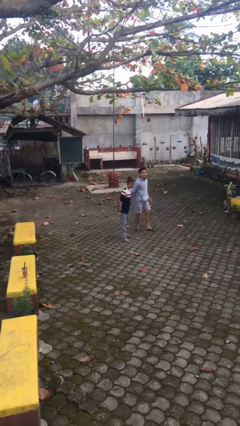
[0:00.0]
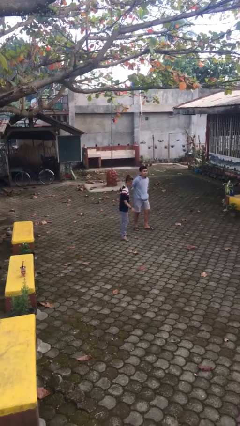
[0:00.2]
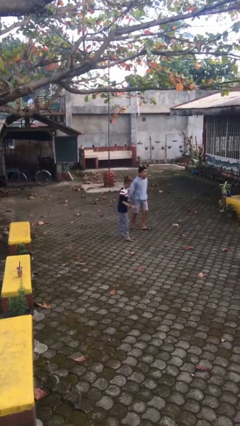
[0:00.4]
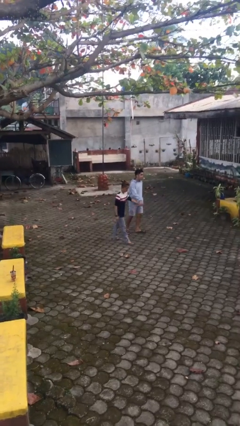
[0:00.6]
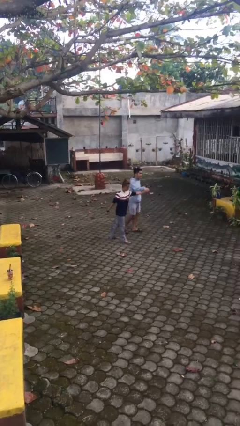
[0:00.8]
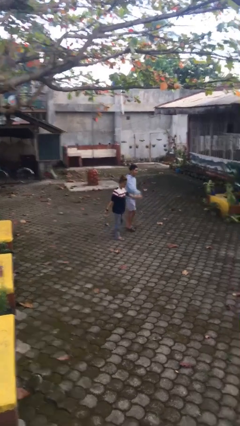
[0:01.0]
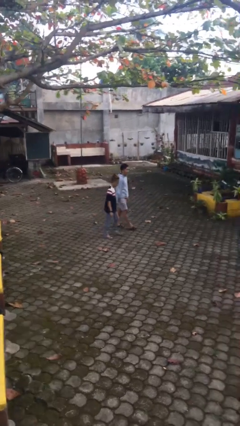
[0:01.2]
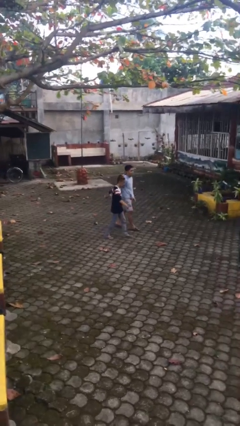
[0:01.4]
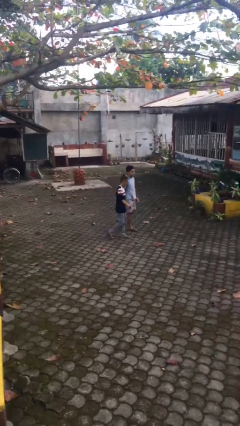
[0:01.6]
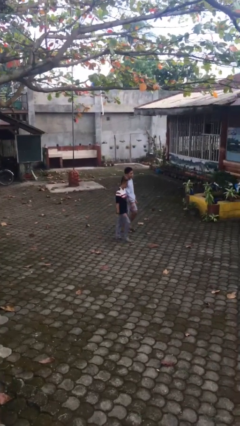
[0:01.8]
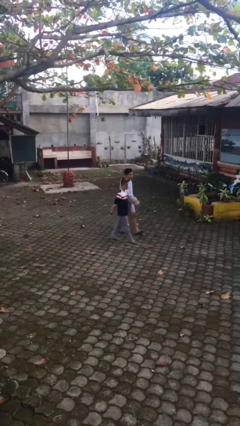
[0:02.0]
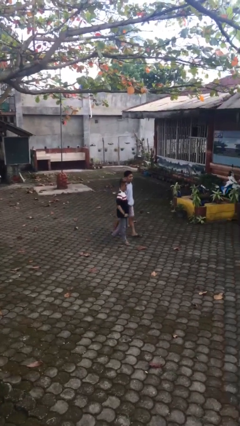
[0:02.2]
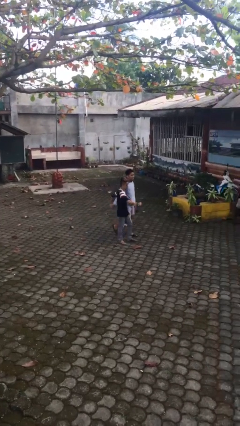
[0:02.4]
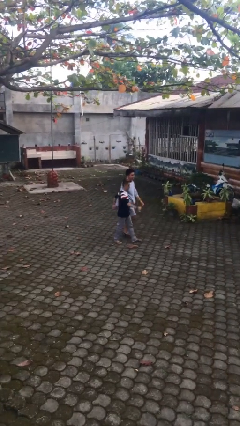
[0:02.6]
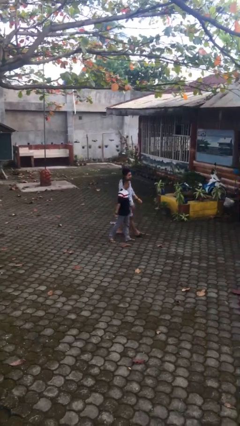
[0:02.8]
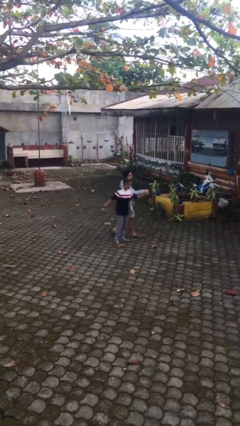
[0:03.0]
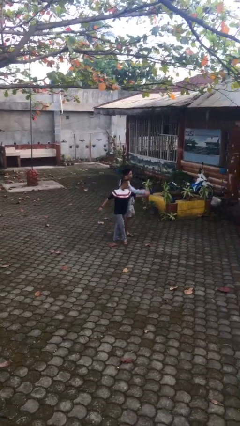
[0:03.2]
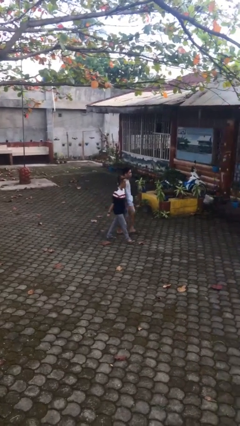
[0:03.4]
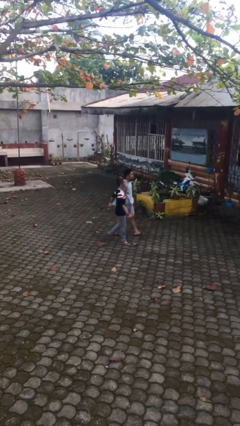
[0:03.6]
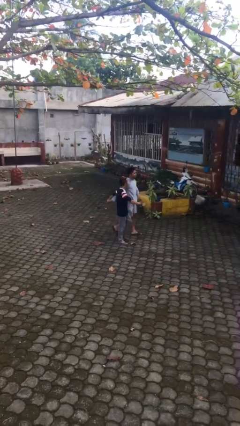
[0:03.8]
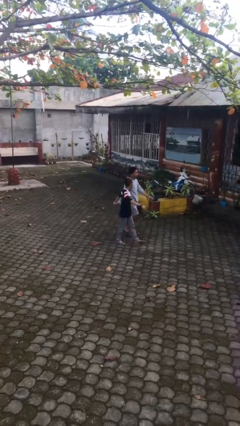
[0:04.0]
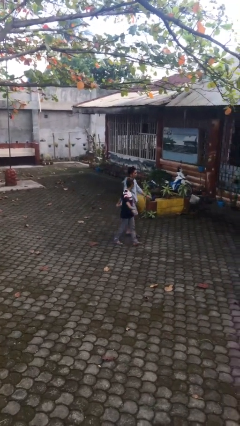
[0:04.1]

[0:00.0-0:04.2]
person holds hand

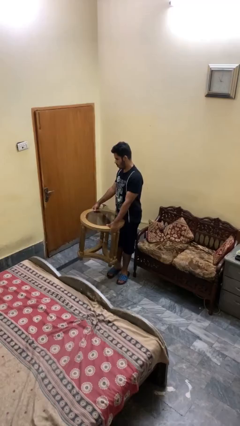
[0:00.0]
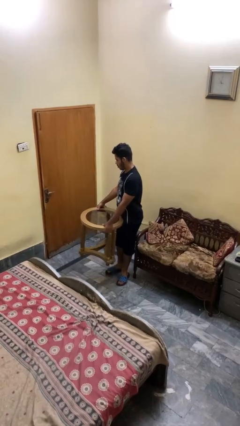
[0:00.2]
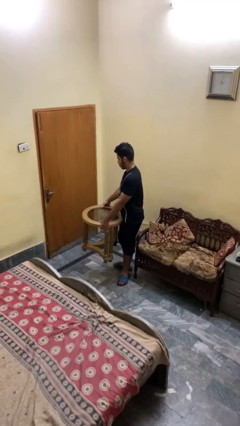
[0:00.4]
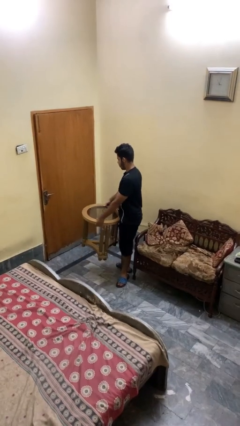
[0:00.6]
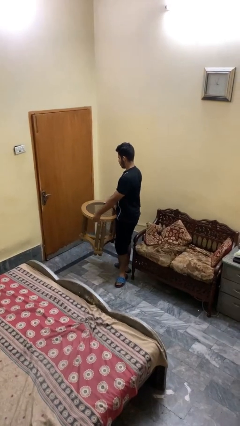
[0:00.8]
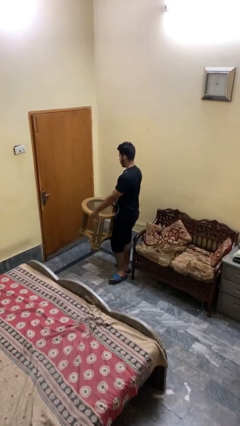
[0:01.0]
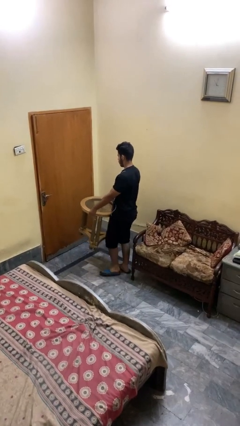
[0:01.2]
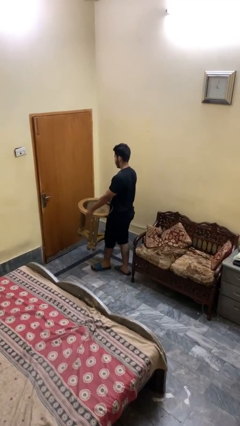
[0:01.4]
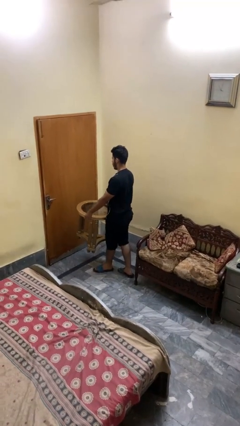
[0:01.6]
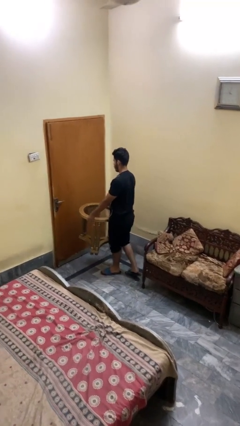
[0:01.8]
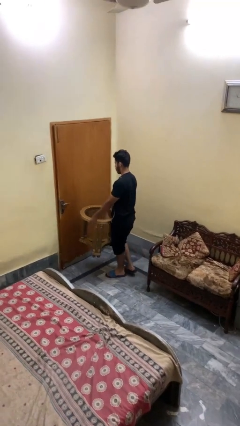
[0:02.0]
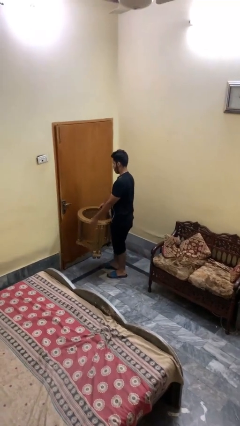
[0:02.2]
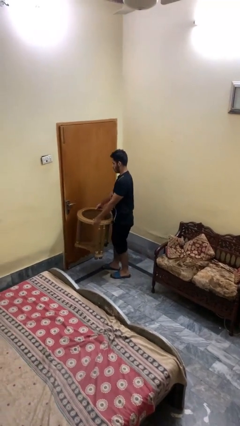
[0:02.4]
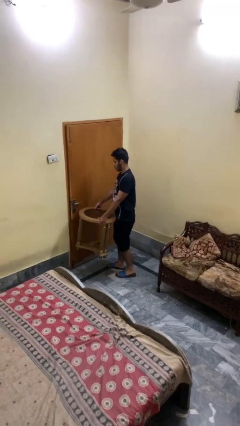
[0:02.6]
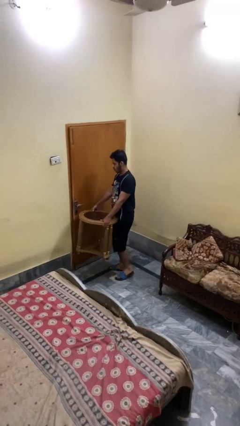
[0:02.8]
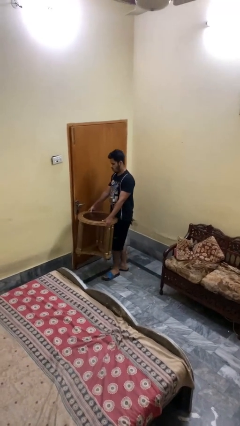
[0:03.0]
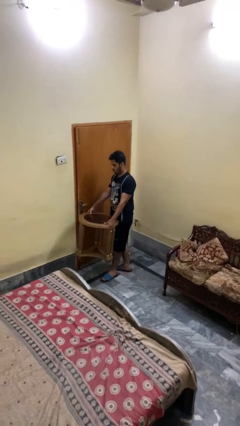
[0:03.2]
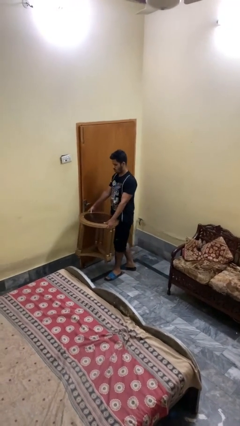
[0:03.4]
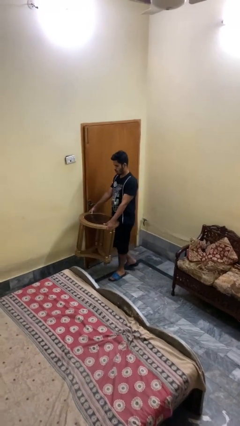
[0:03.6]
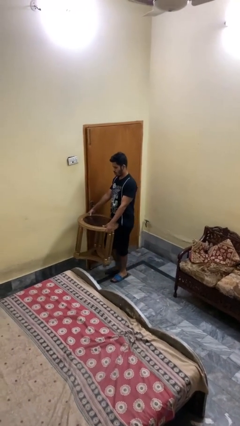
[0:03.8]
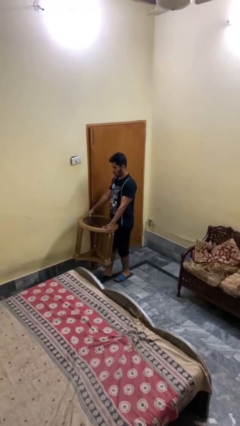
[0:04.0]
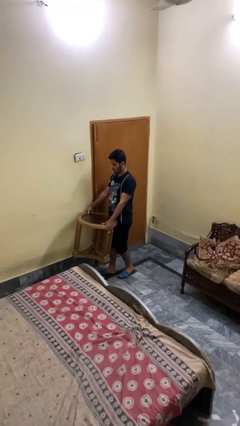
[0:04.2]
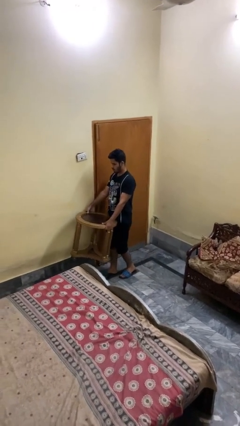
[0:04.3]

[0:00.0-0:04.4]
person carries furniture

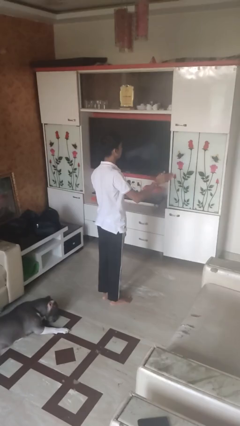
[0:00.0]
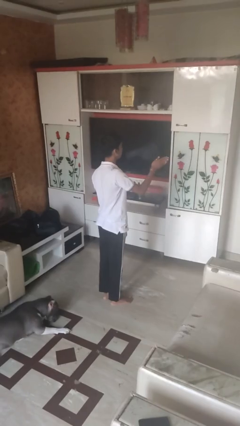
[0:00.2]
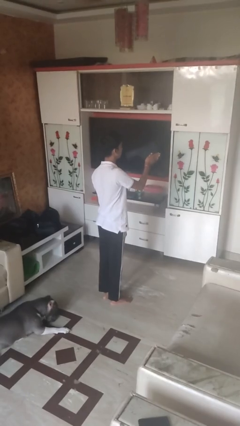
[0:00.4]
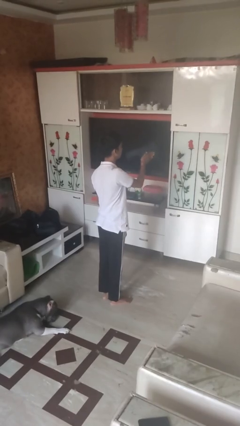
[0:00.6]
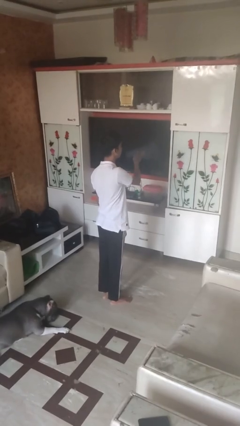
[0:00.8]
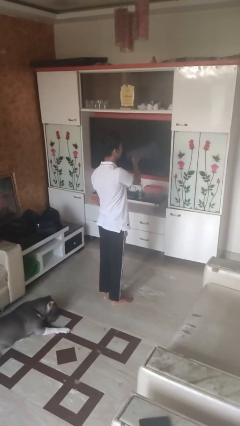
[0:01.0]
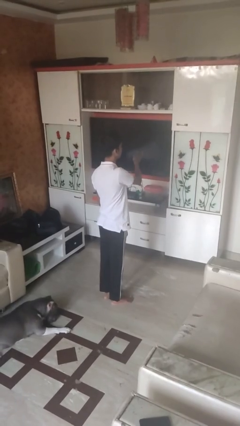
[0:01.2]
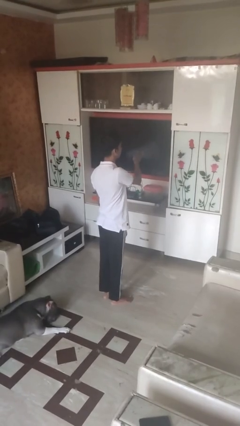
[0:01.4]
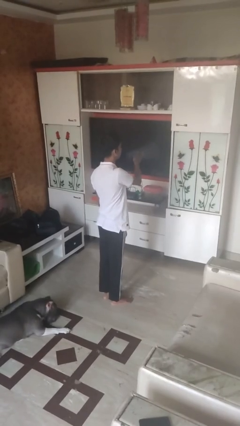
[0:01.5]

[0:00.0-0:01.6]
person gestures swipe left

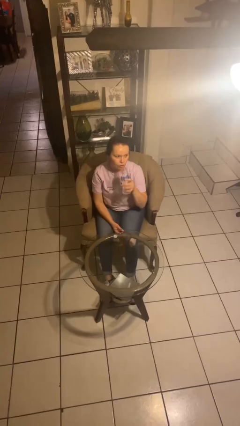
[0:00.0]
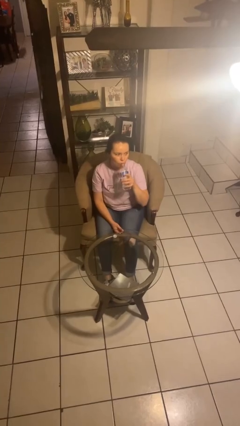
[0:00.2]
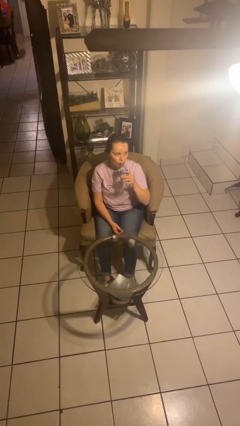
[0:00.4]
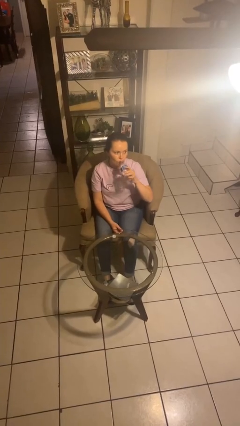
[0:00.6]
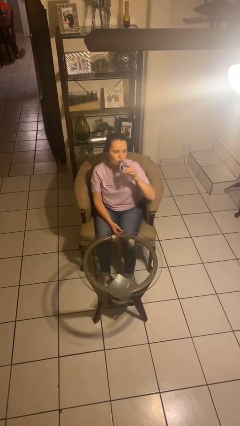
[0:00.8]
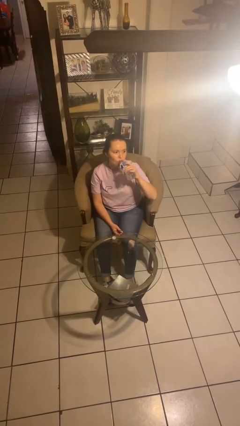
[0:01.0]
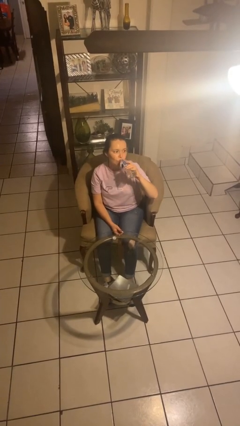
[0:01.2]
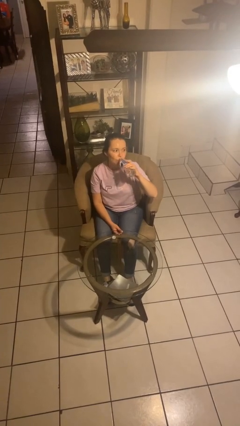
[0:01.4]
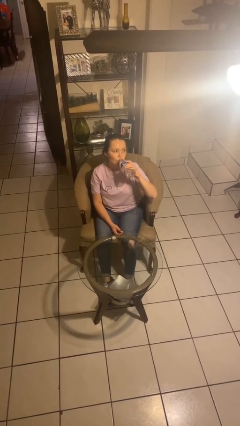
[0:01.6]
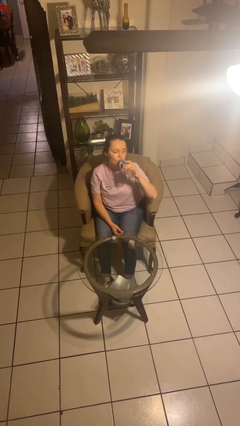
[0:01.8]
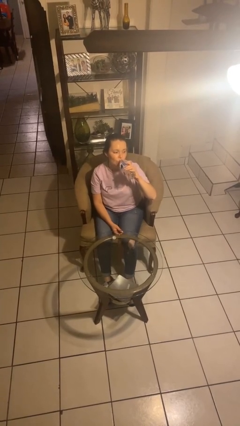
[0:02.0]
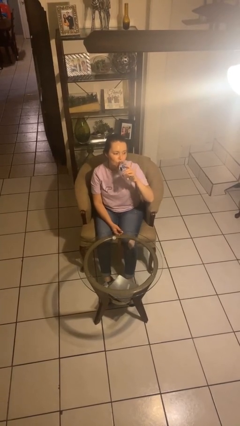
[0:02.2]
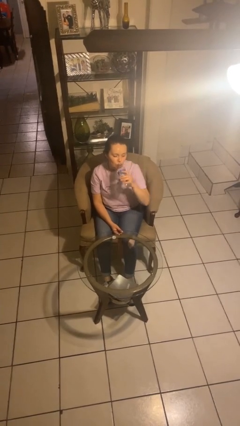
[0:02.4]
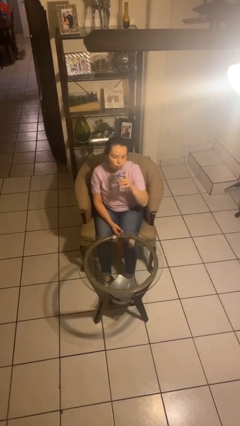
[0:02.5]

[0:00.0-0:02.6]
person drinks from bottle

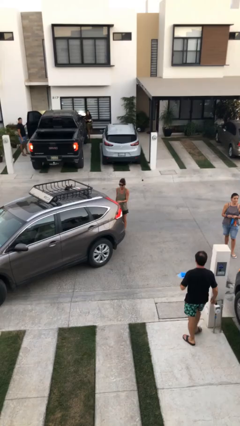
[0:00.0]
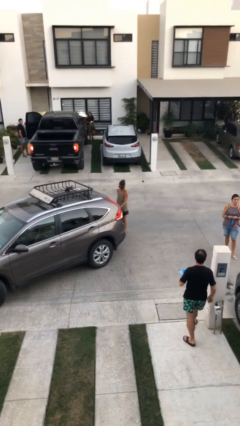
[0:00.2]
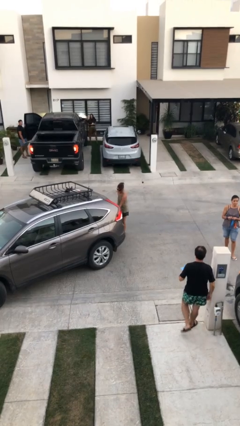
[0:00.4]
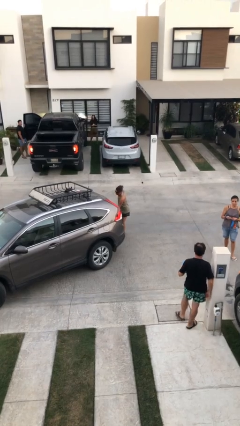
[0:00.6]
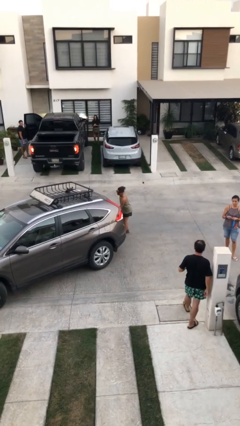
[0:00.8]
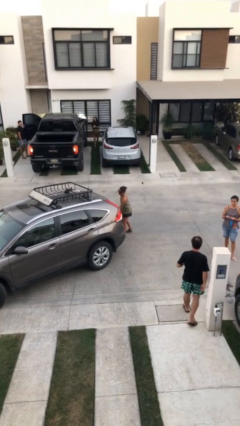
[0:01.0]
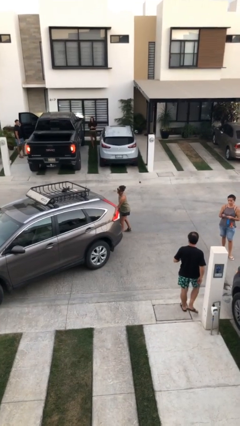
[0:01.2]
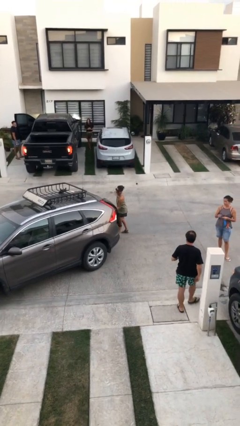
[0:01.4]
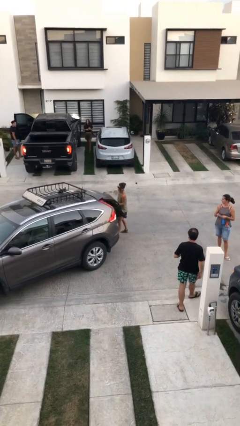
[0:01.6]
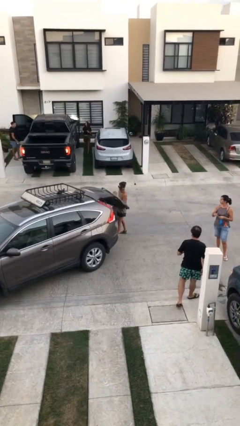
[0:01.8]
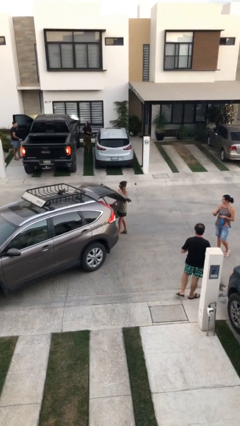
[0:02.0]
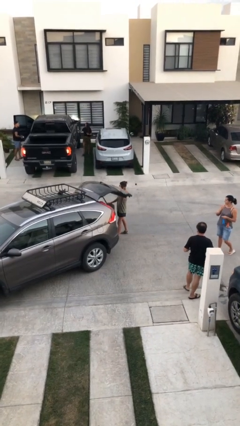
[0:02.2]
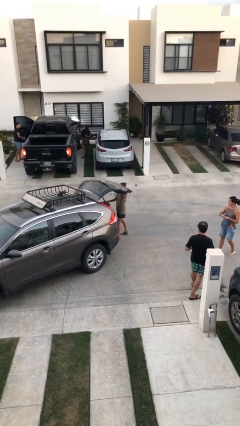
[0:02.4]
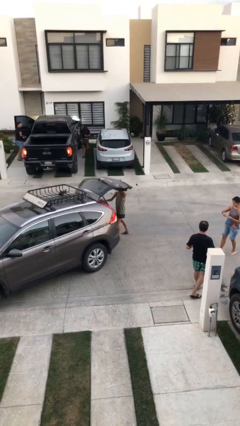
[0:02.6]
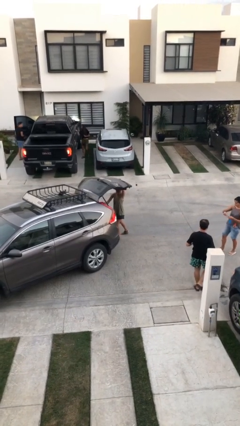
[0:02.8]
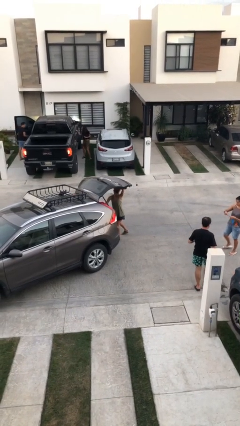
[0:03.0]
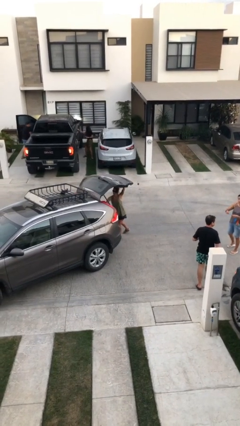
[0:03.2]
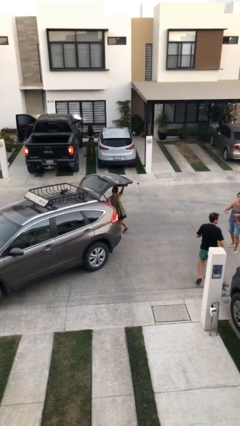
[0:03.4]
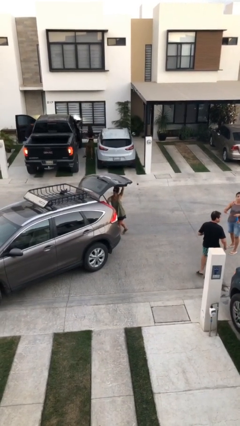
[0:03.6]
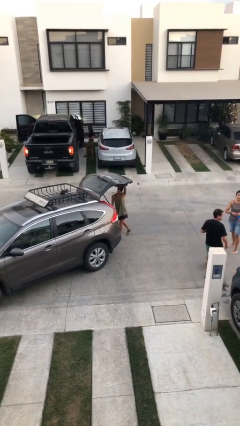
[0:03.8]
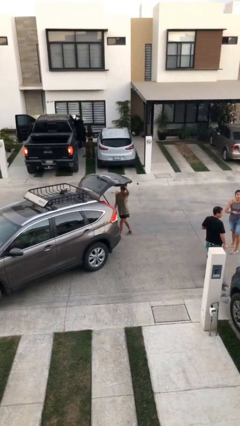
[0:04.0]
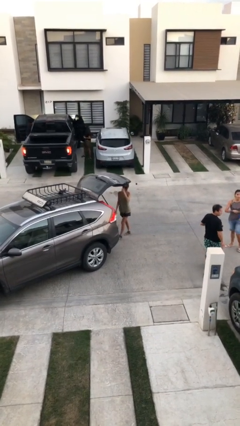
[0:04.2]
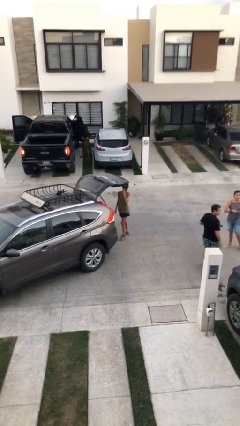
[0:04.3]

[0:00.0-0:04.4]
person opens car trunk

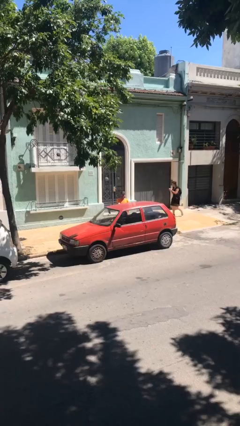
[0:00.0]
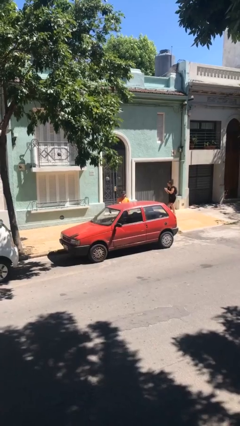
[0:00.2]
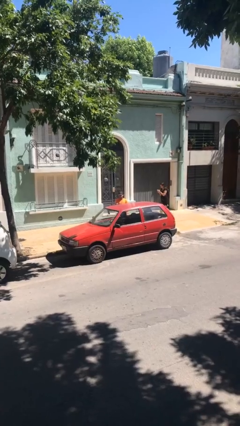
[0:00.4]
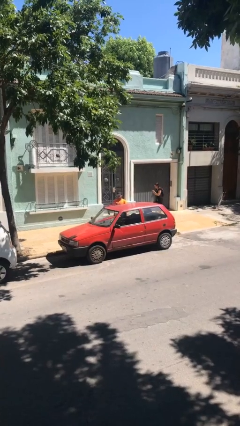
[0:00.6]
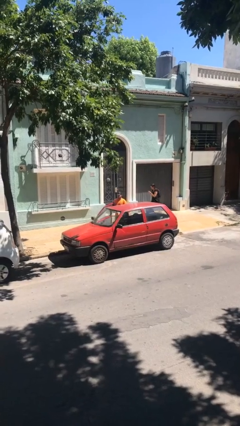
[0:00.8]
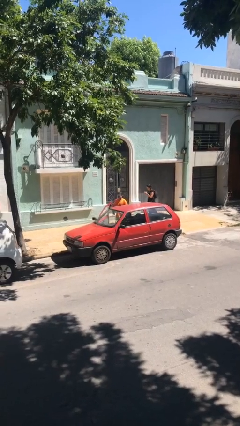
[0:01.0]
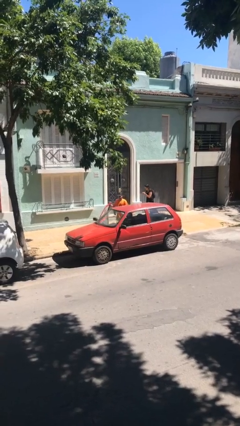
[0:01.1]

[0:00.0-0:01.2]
person opens car door
